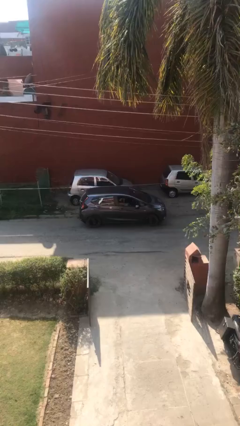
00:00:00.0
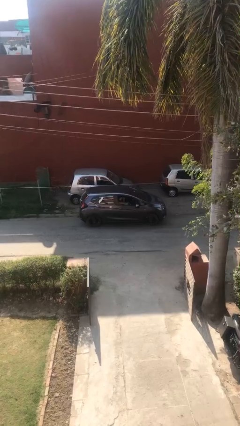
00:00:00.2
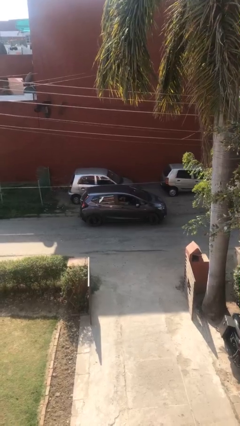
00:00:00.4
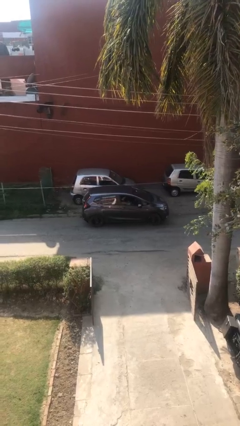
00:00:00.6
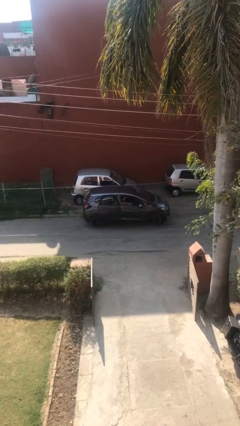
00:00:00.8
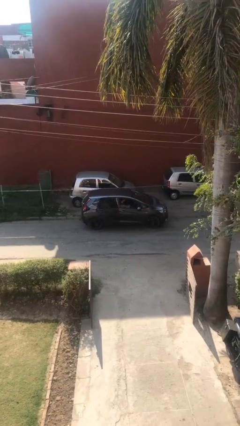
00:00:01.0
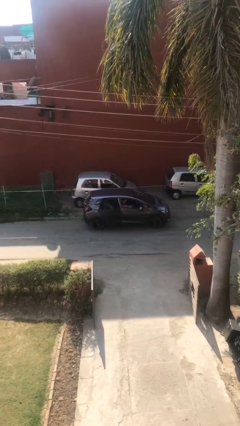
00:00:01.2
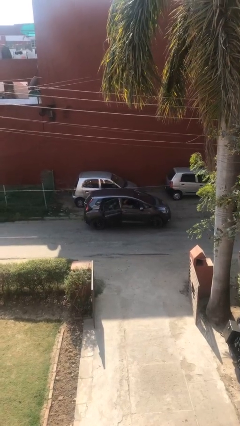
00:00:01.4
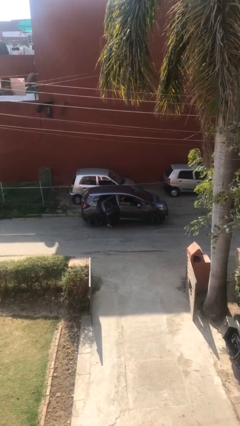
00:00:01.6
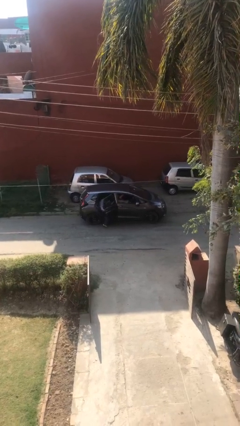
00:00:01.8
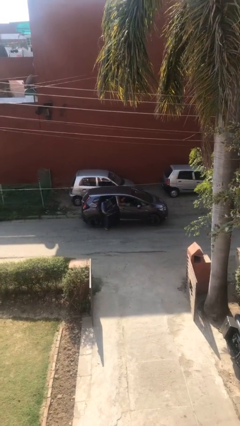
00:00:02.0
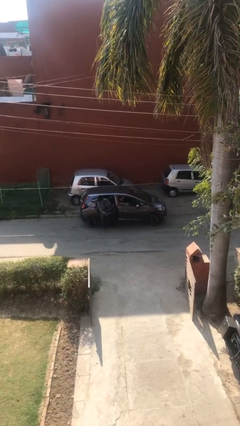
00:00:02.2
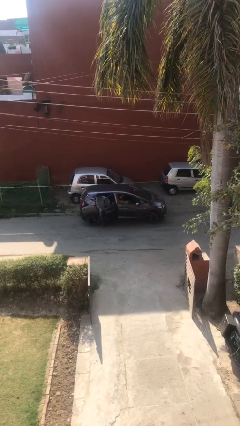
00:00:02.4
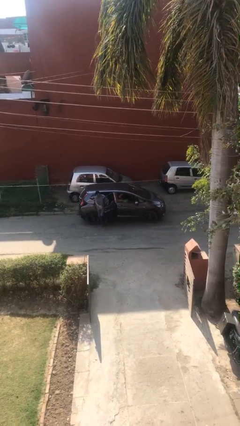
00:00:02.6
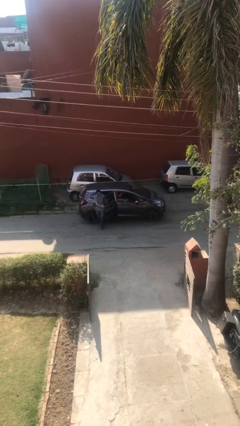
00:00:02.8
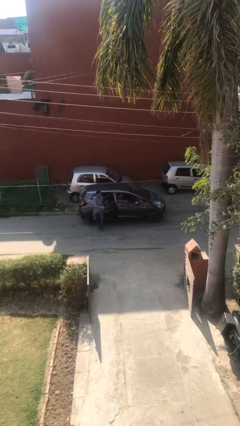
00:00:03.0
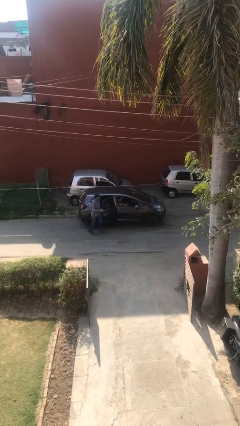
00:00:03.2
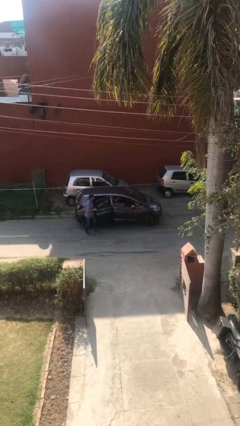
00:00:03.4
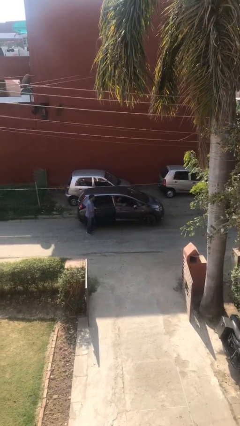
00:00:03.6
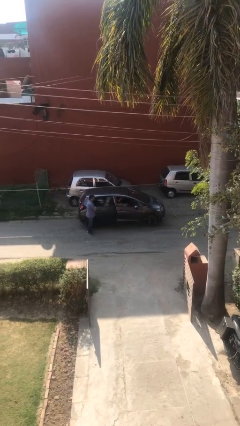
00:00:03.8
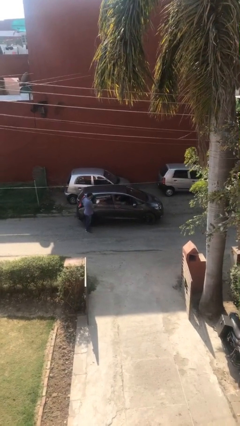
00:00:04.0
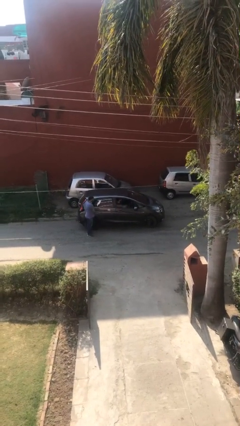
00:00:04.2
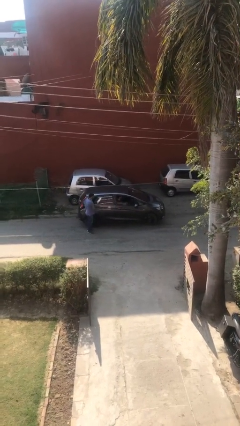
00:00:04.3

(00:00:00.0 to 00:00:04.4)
car drops off person

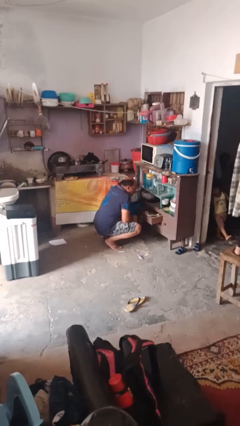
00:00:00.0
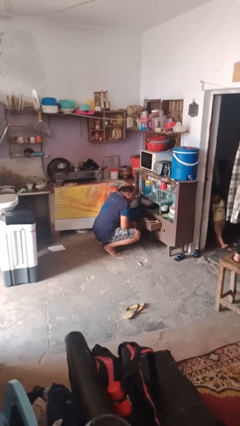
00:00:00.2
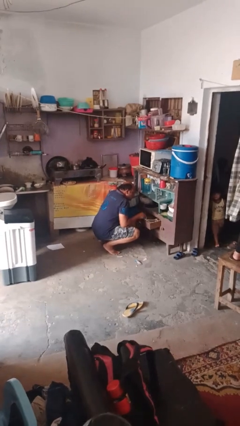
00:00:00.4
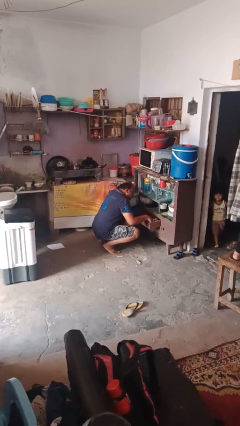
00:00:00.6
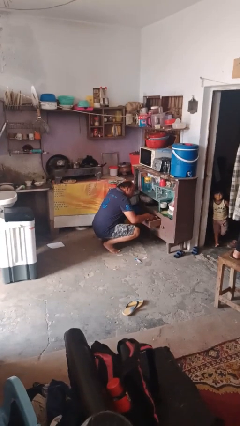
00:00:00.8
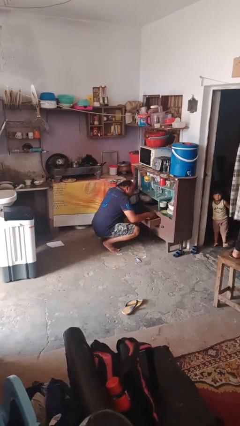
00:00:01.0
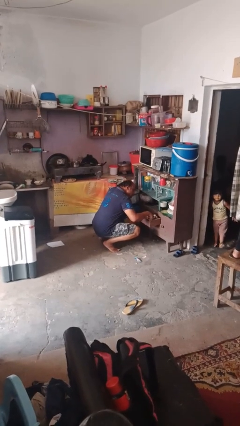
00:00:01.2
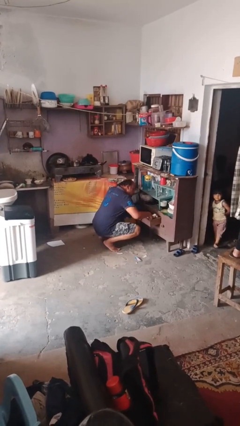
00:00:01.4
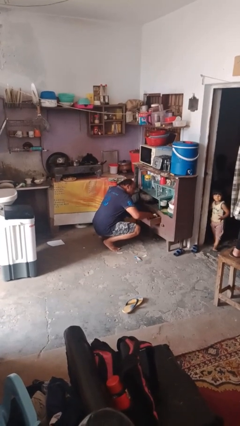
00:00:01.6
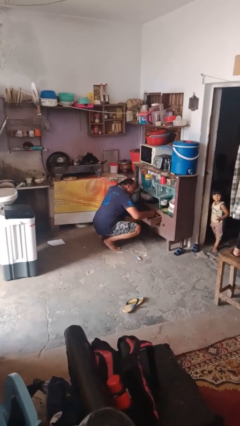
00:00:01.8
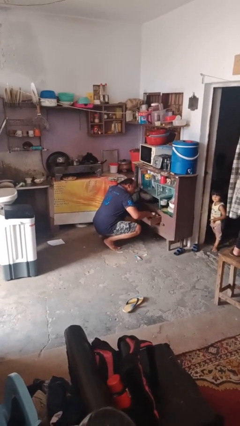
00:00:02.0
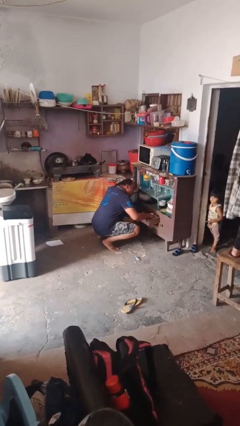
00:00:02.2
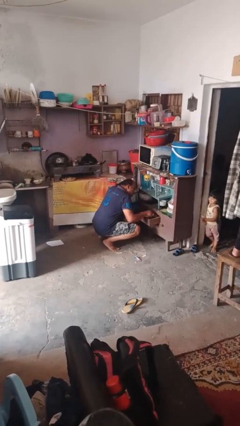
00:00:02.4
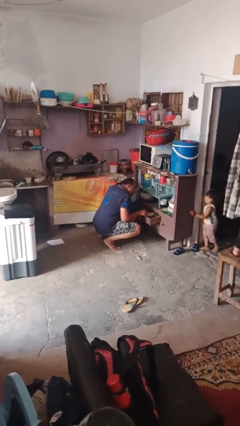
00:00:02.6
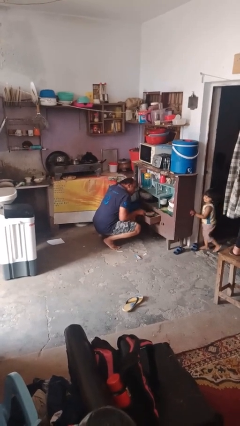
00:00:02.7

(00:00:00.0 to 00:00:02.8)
person searches in kitchen drawer

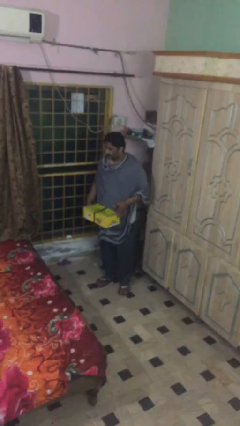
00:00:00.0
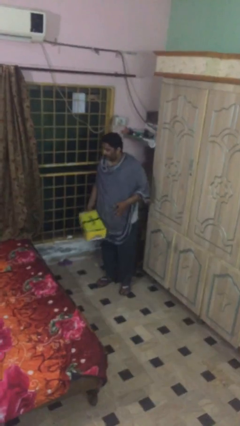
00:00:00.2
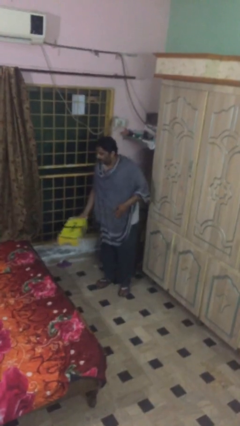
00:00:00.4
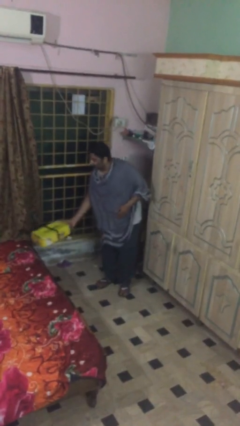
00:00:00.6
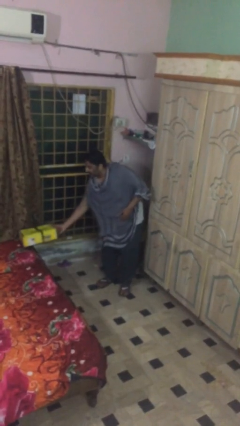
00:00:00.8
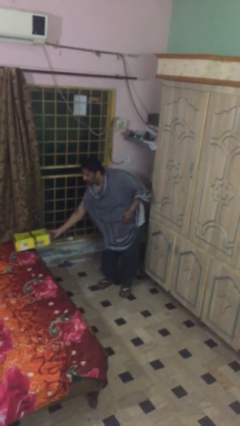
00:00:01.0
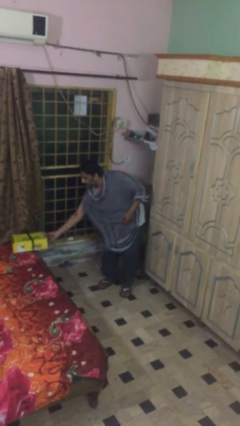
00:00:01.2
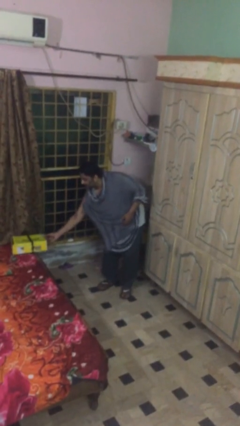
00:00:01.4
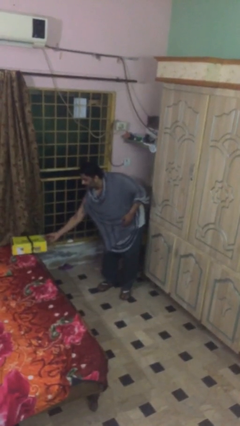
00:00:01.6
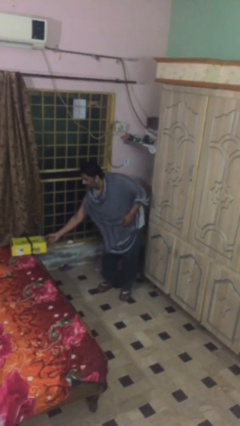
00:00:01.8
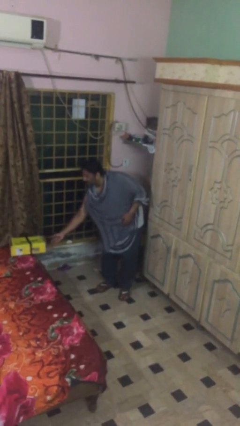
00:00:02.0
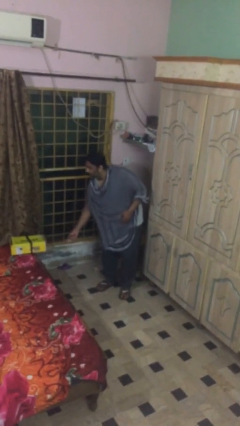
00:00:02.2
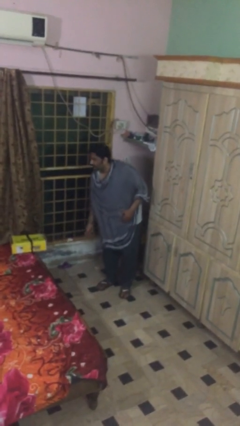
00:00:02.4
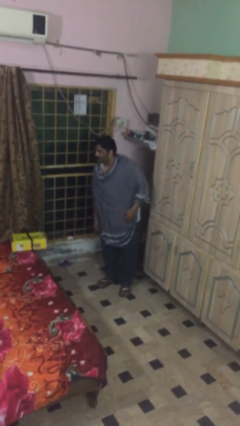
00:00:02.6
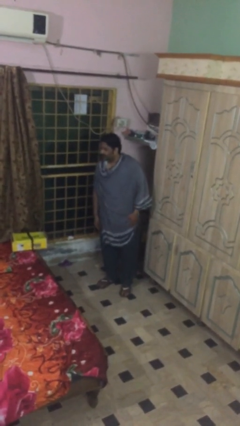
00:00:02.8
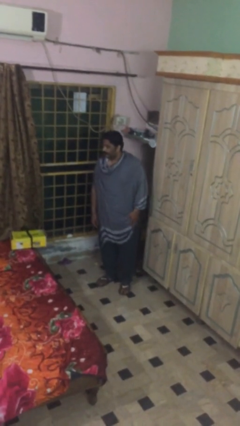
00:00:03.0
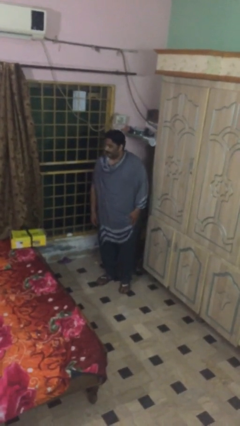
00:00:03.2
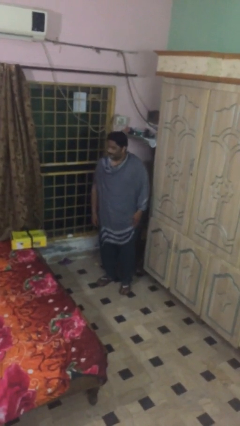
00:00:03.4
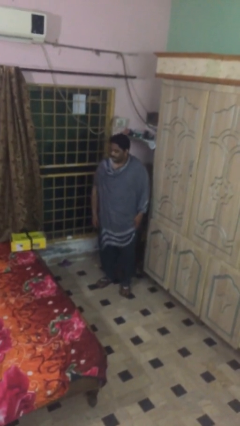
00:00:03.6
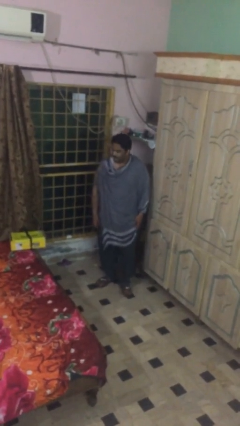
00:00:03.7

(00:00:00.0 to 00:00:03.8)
person puts down object on table

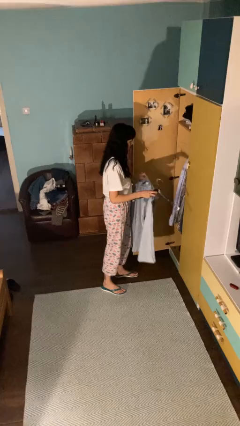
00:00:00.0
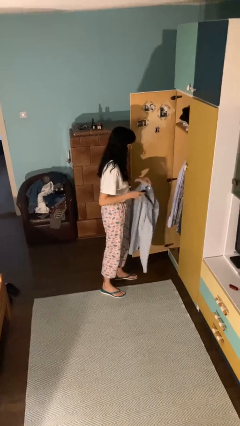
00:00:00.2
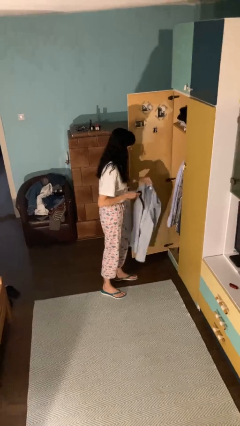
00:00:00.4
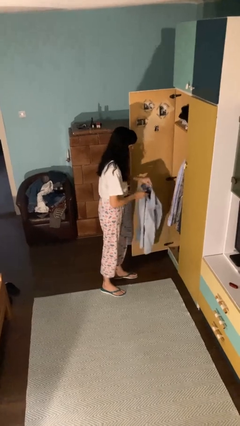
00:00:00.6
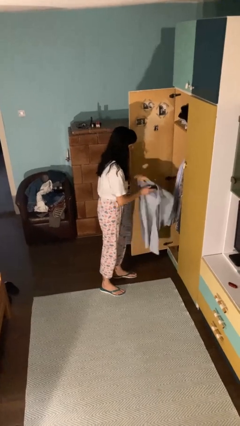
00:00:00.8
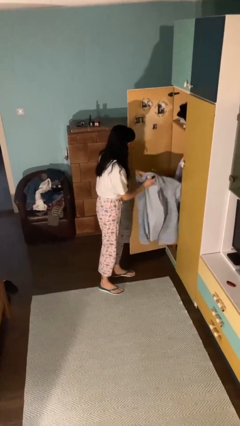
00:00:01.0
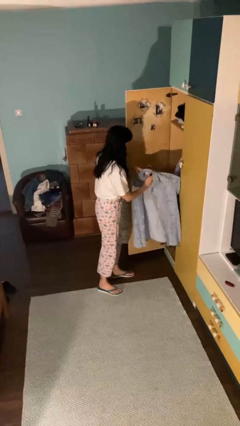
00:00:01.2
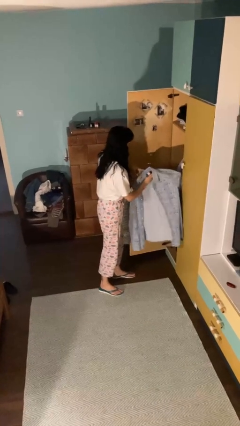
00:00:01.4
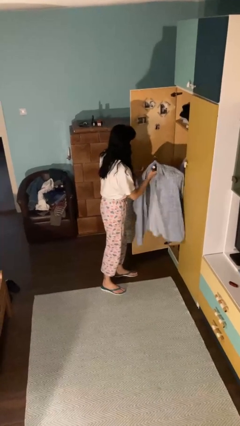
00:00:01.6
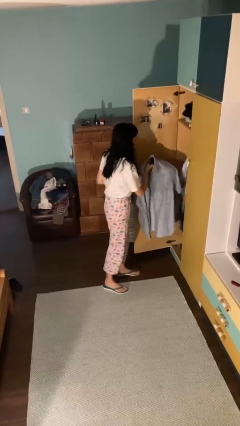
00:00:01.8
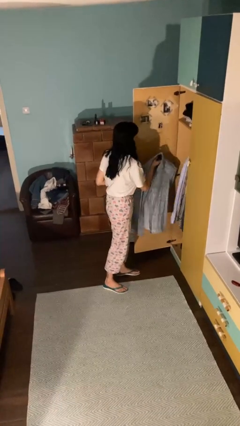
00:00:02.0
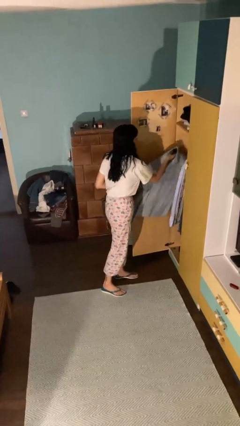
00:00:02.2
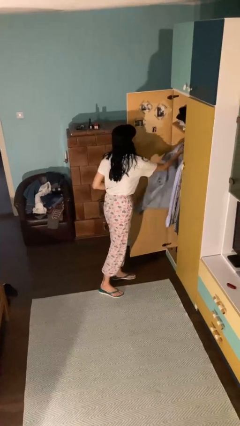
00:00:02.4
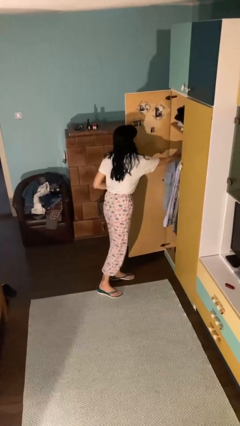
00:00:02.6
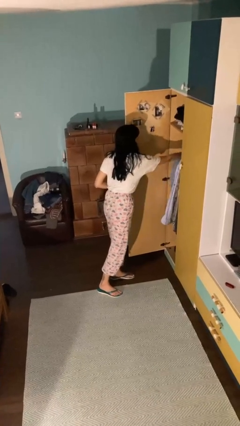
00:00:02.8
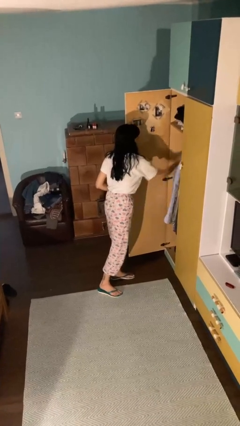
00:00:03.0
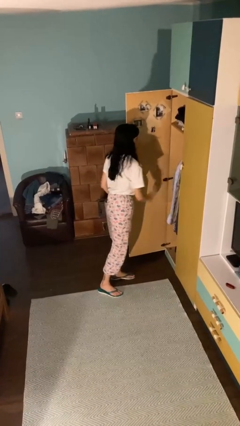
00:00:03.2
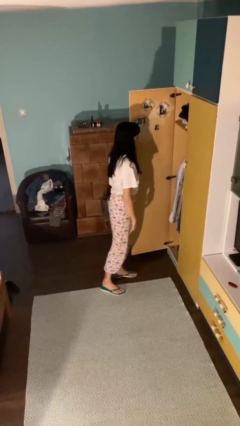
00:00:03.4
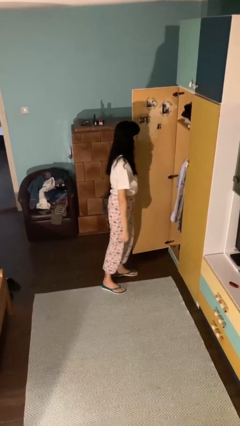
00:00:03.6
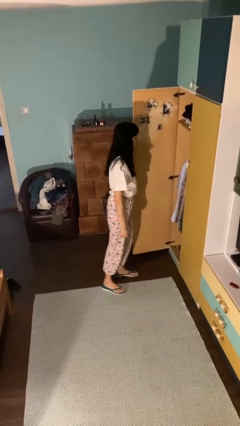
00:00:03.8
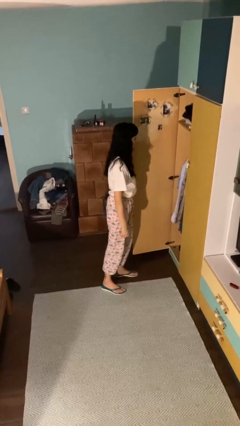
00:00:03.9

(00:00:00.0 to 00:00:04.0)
person puts clothes into closet

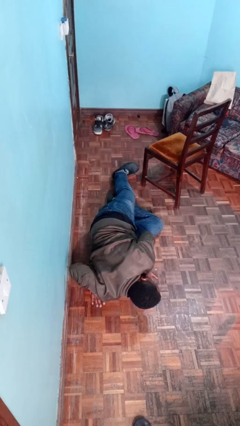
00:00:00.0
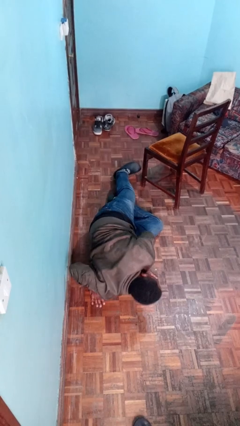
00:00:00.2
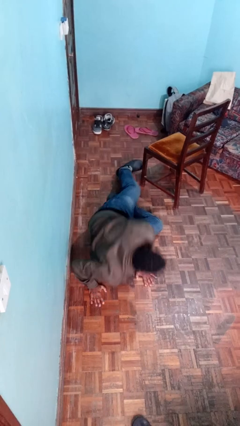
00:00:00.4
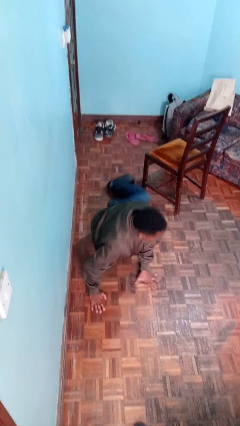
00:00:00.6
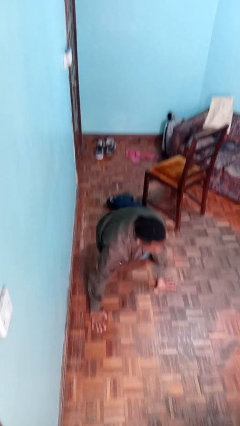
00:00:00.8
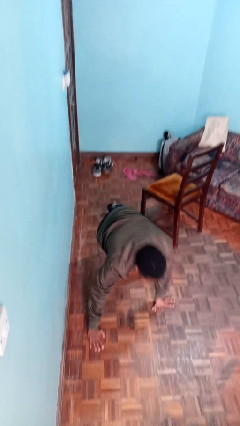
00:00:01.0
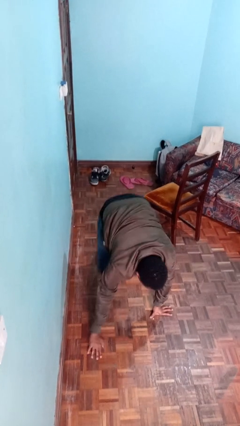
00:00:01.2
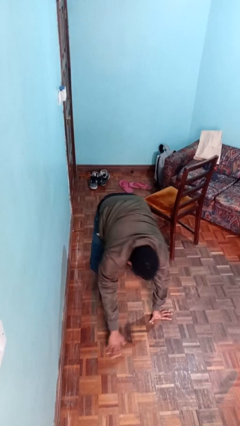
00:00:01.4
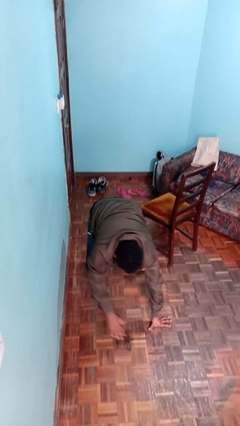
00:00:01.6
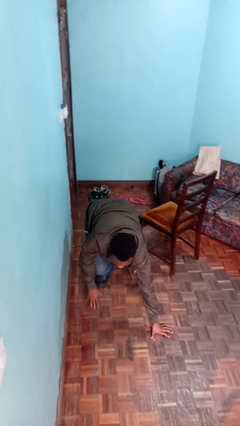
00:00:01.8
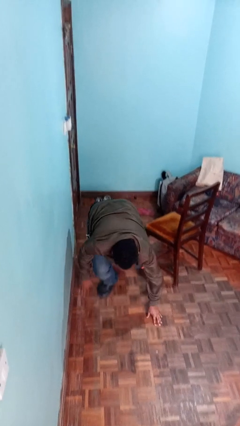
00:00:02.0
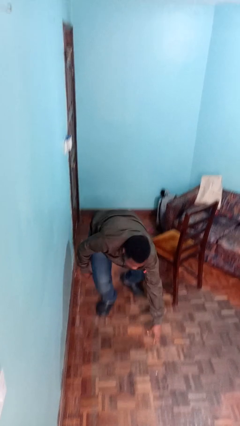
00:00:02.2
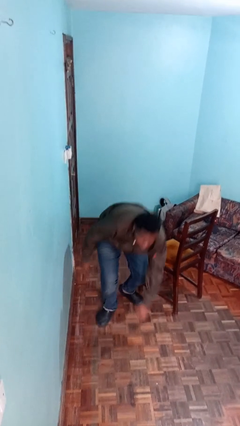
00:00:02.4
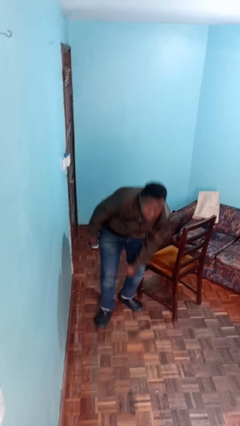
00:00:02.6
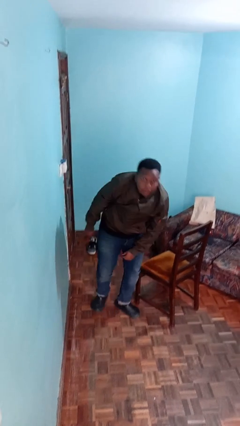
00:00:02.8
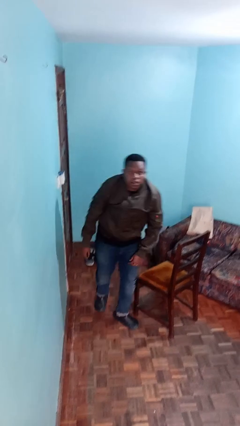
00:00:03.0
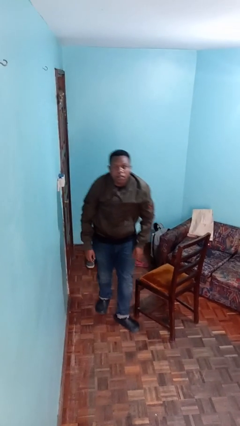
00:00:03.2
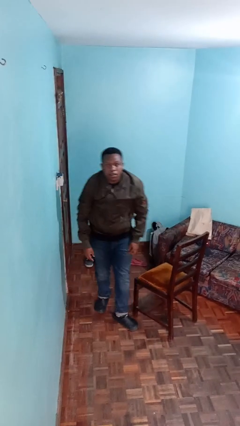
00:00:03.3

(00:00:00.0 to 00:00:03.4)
person stands up from floor
